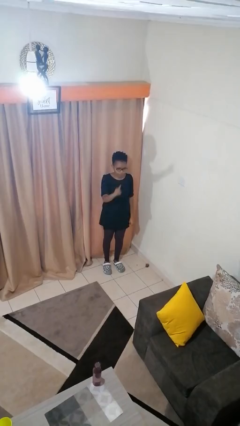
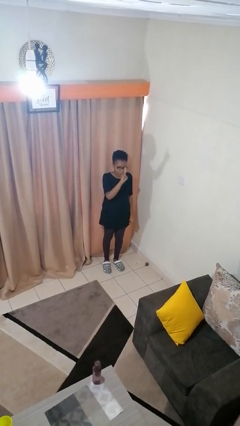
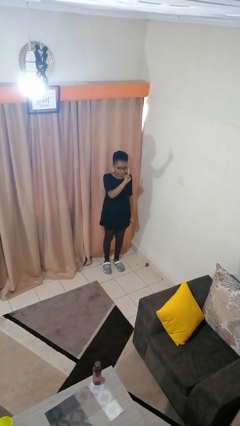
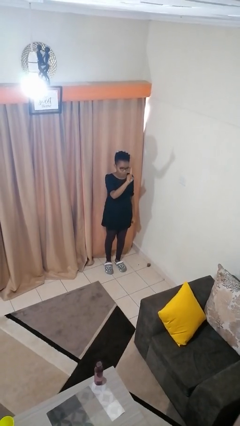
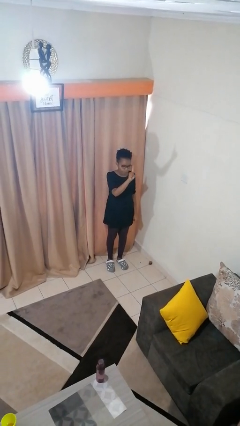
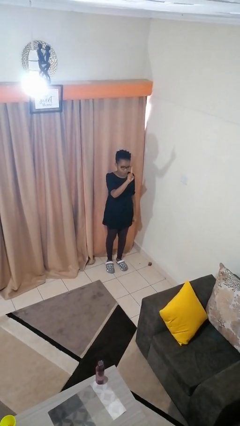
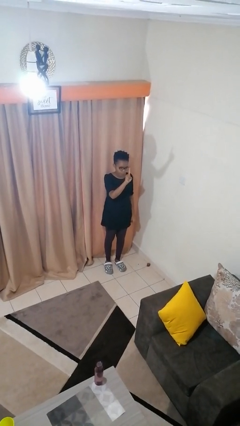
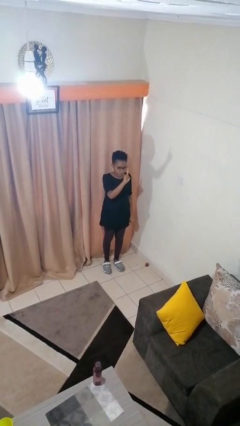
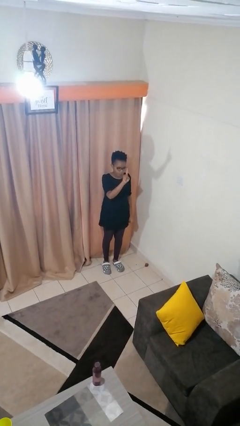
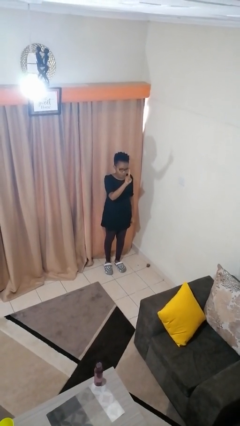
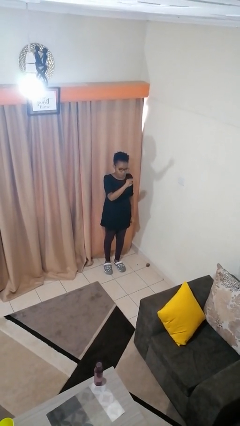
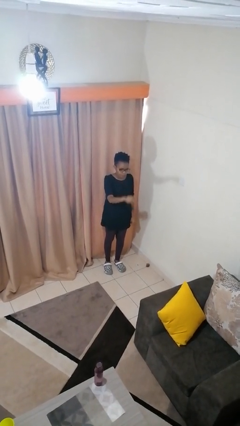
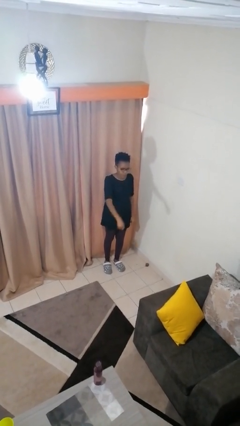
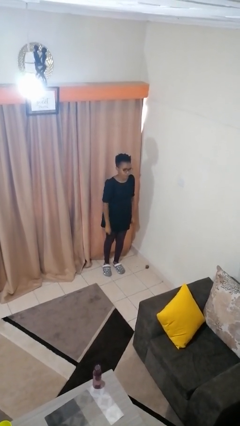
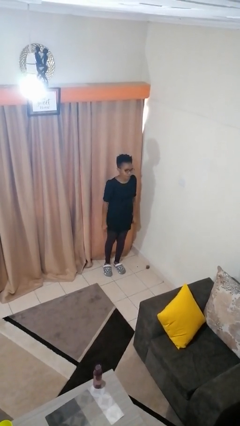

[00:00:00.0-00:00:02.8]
person gestures number one

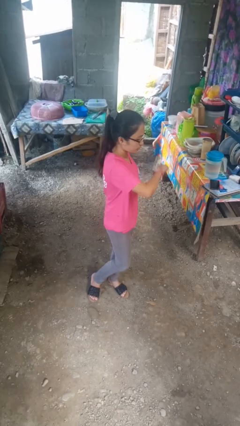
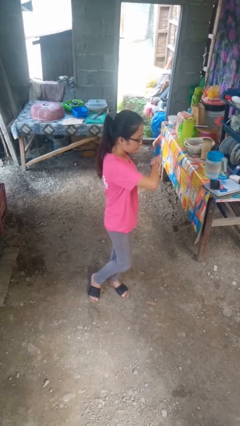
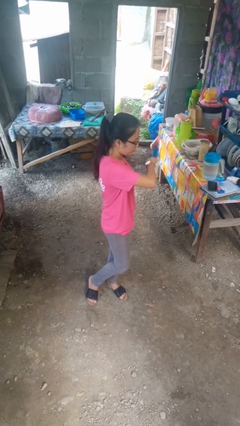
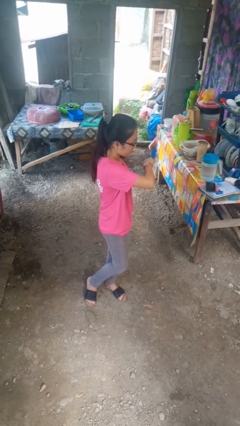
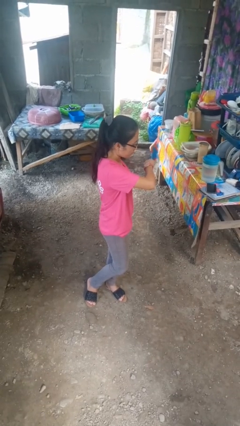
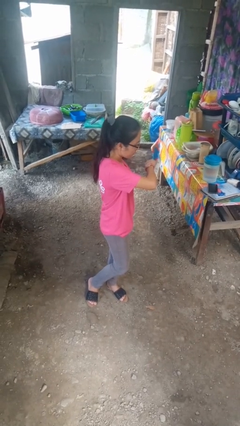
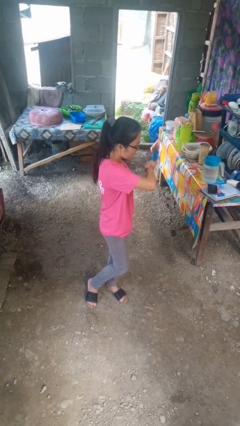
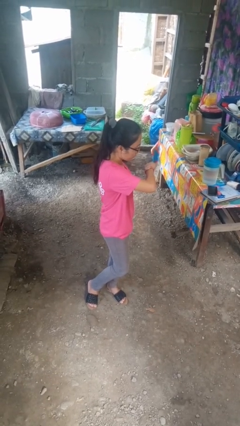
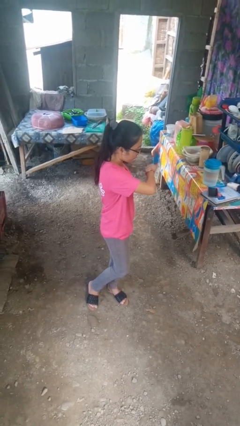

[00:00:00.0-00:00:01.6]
person looks at wristwatch

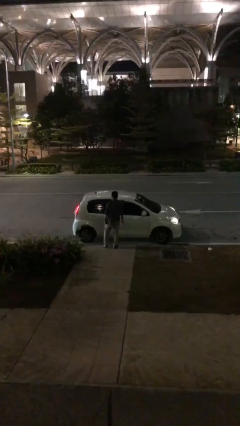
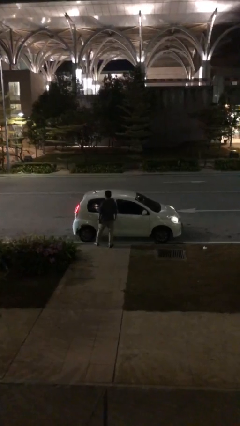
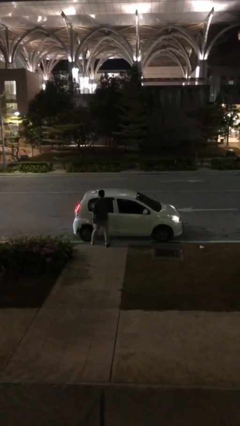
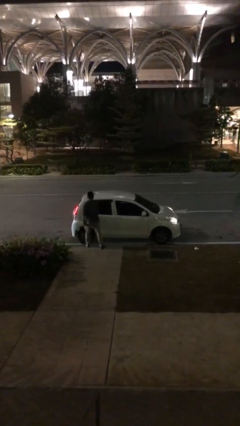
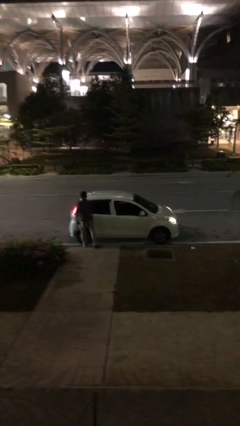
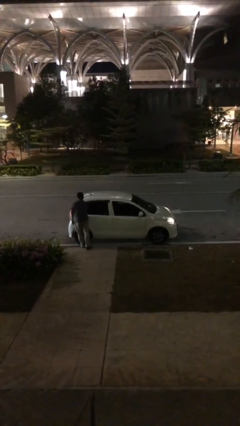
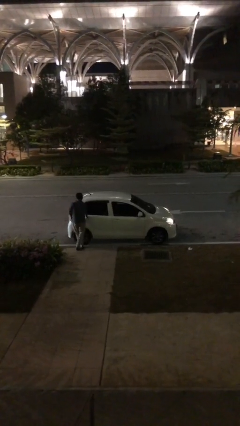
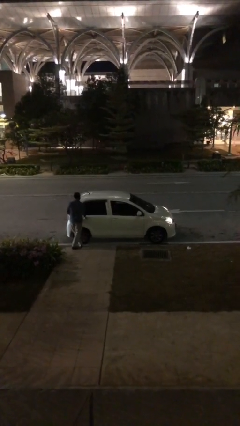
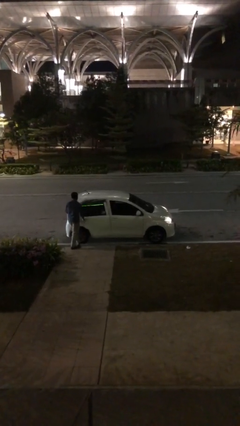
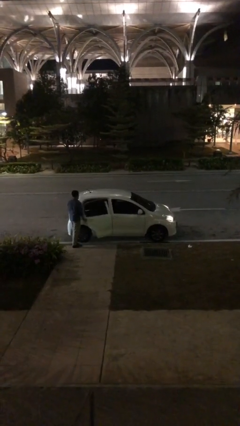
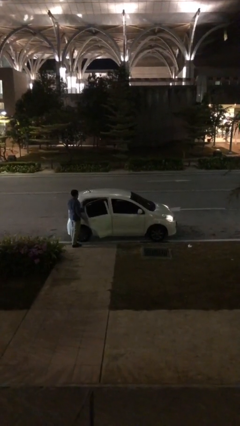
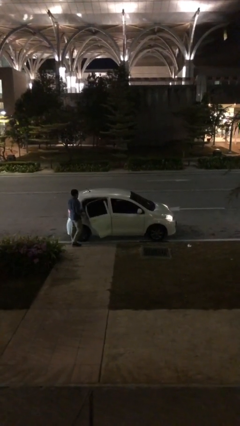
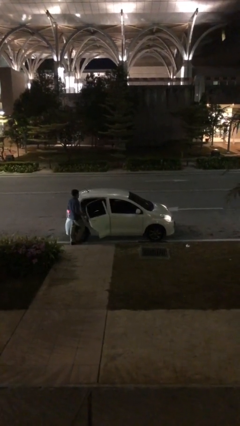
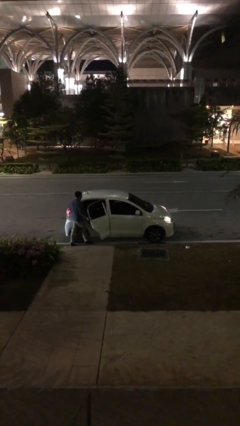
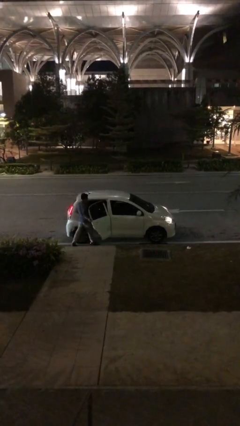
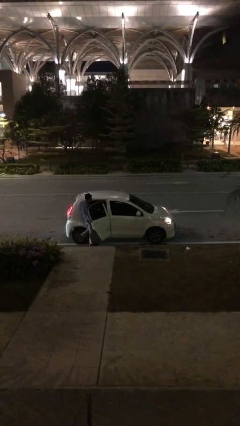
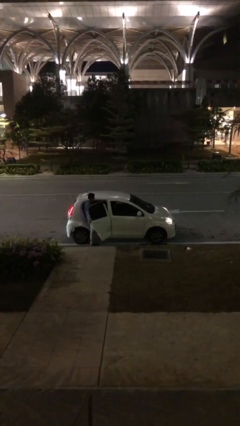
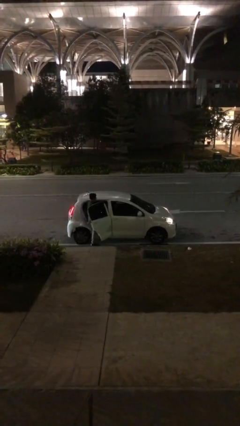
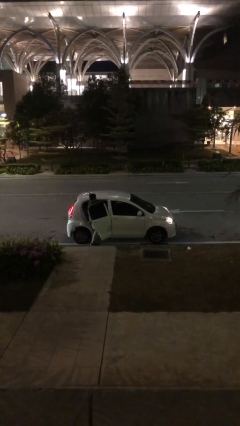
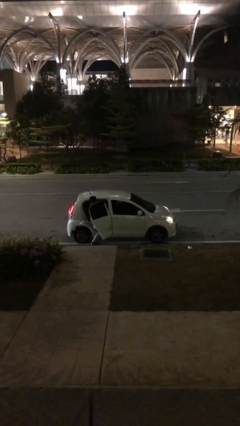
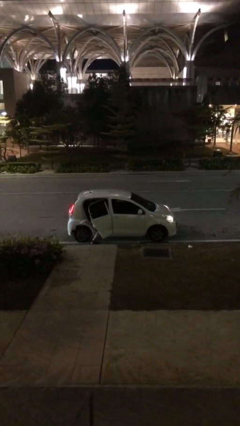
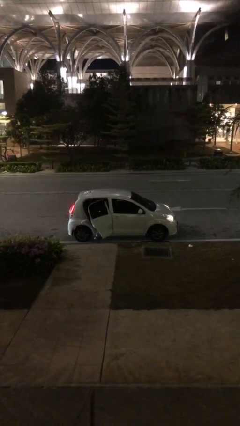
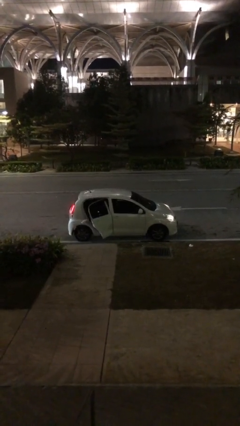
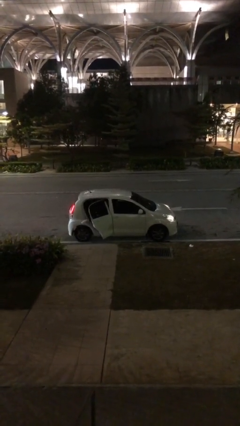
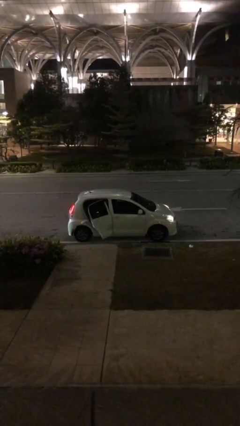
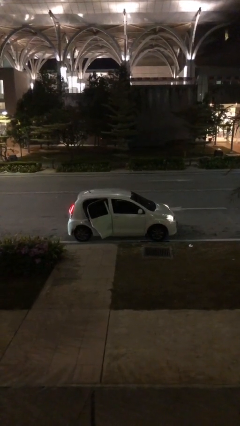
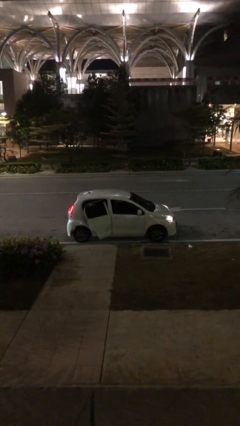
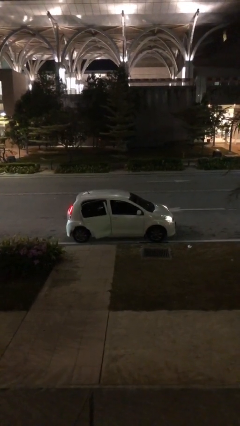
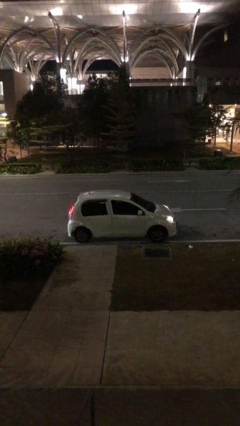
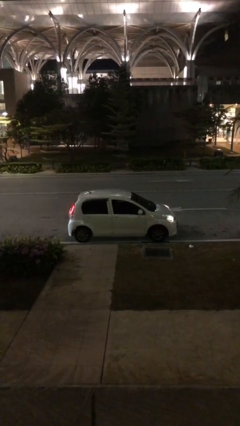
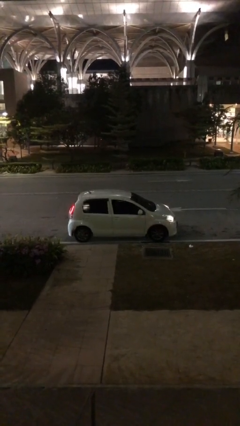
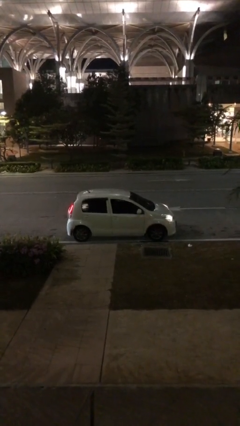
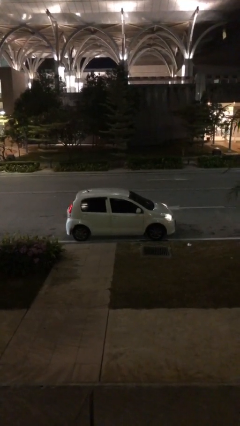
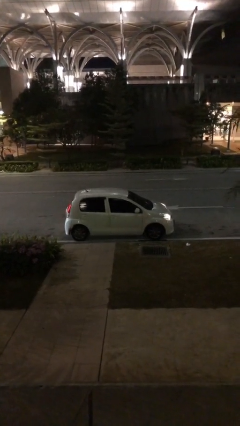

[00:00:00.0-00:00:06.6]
car picks up person

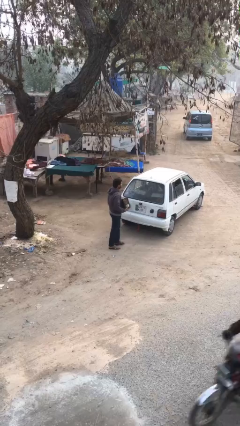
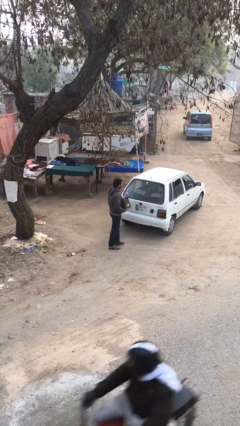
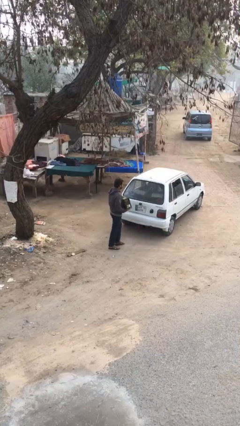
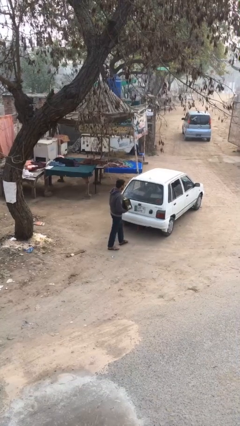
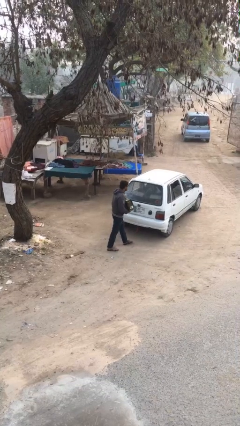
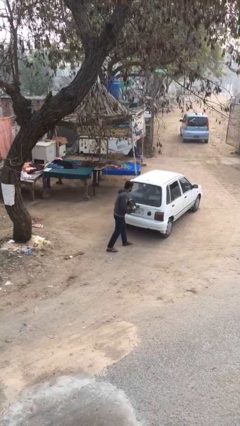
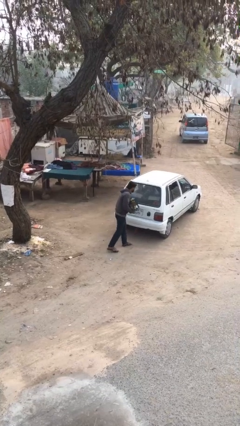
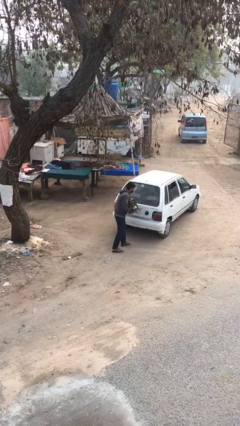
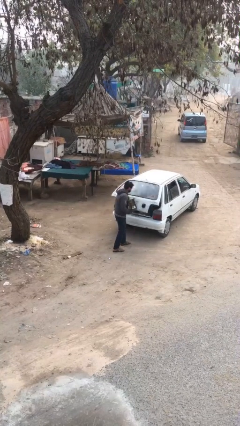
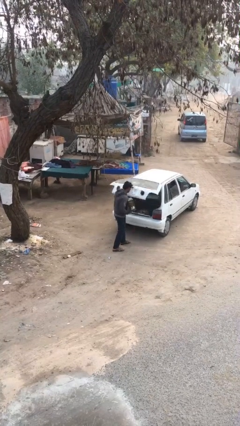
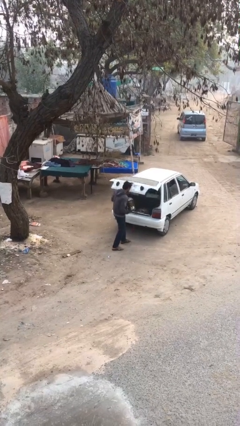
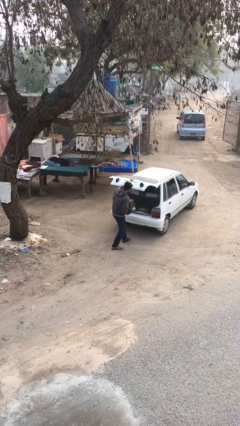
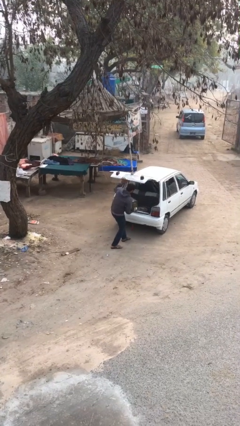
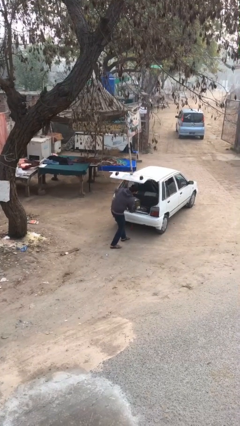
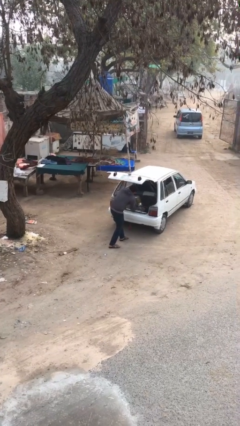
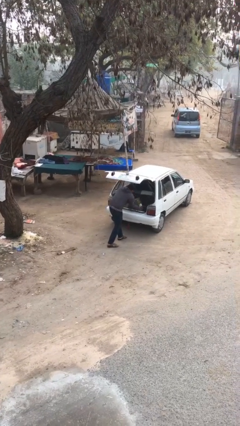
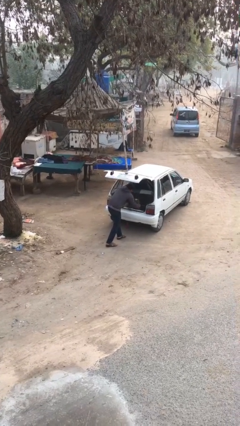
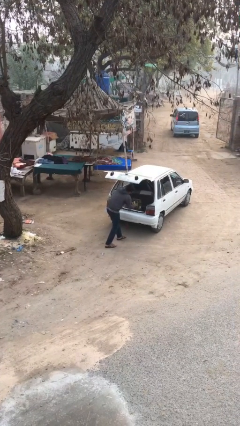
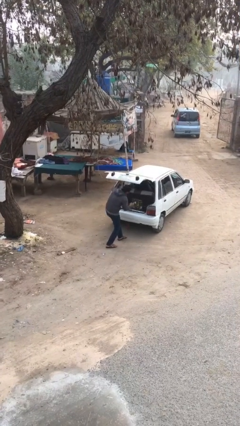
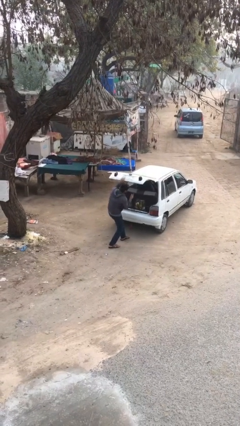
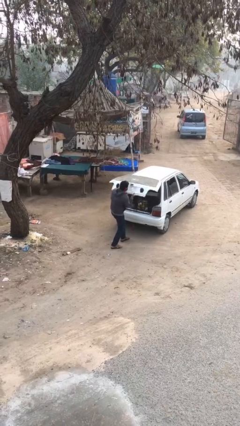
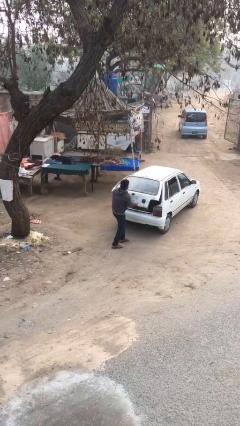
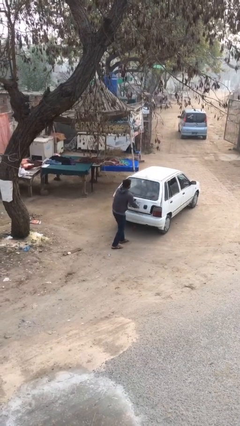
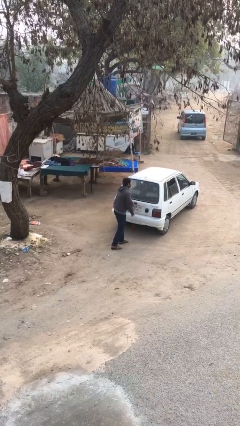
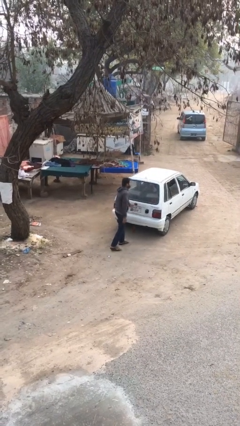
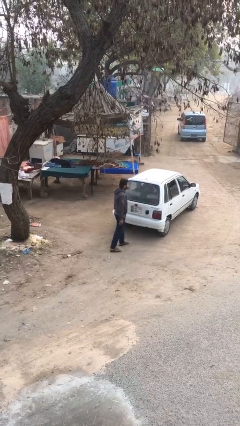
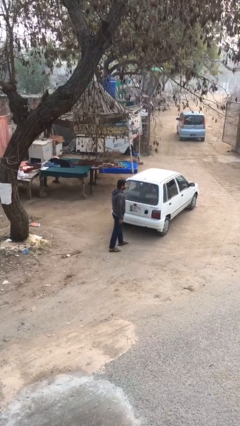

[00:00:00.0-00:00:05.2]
person loads car

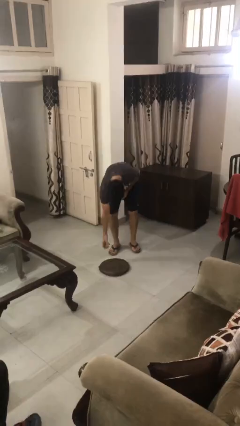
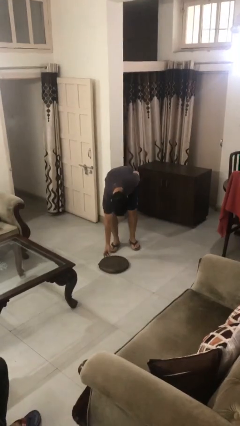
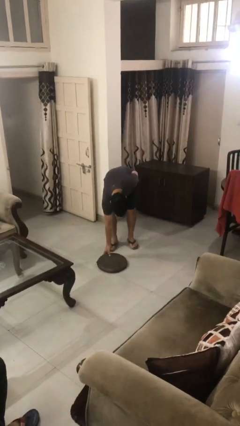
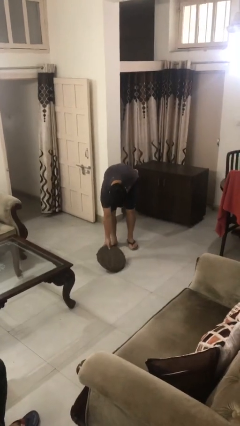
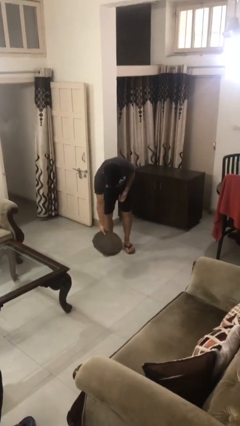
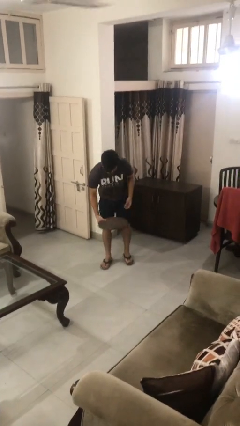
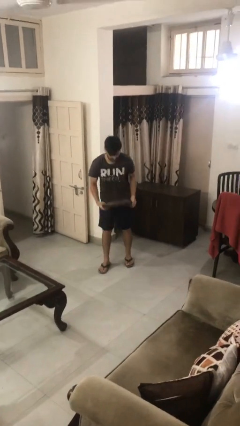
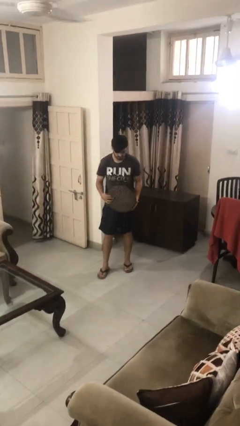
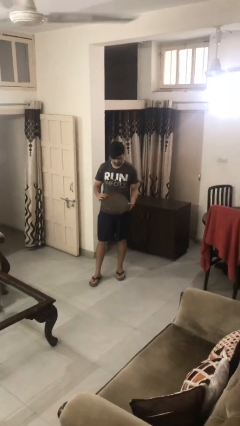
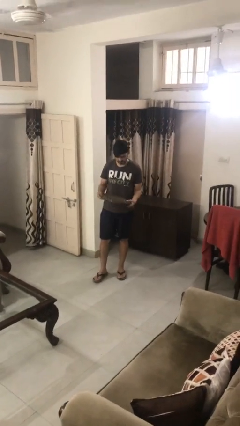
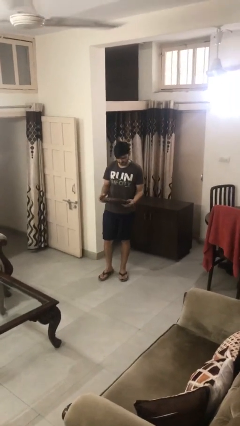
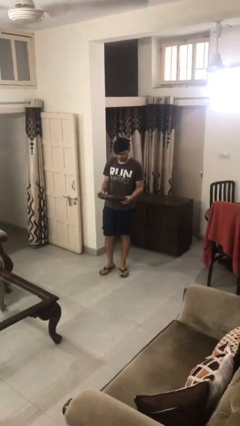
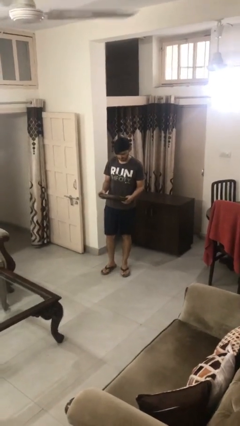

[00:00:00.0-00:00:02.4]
person picks up object from floor
